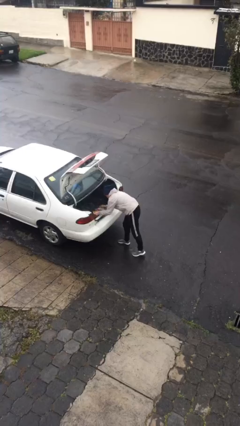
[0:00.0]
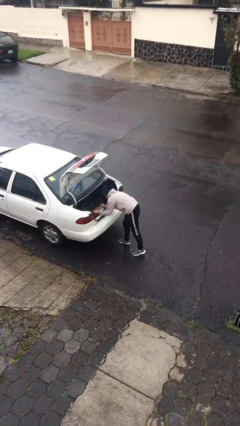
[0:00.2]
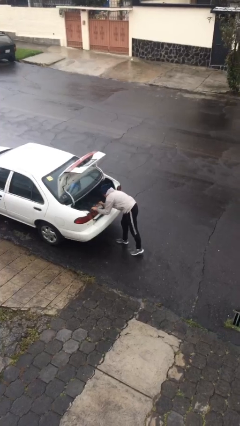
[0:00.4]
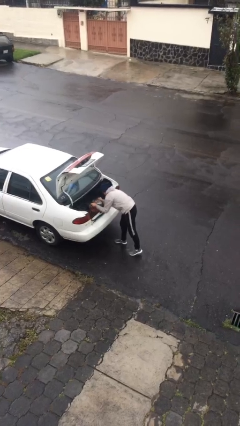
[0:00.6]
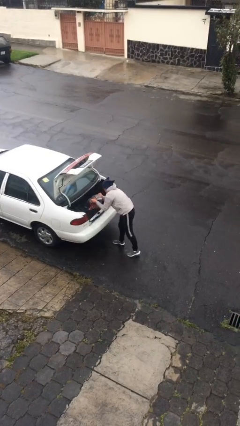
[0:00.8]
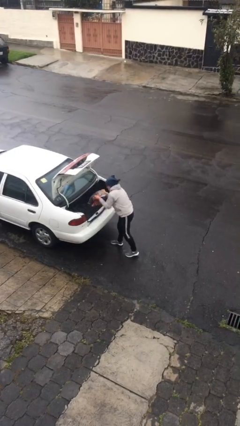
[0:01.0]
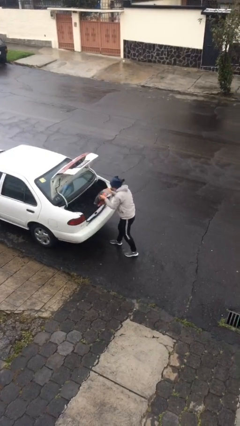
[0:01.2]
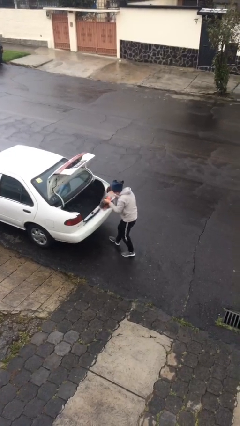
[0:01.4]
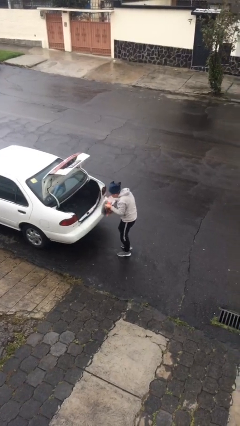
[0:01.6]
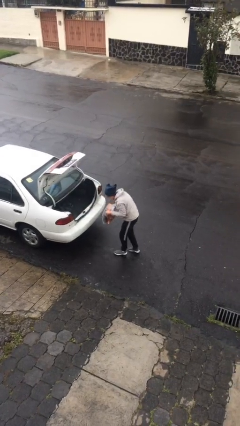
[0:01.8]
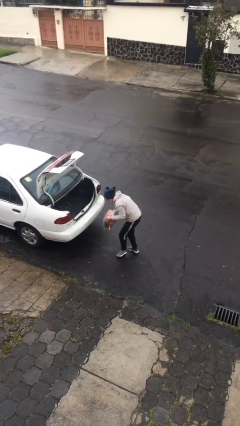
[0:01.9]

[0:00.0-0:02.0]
person unloads car

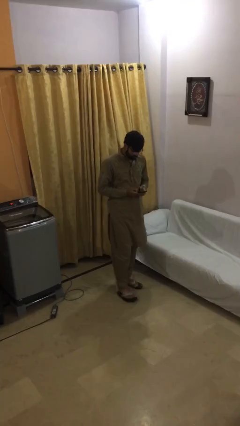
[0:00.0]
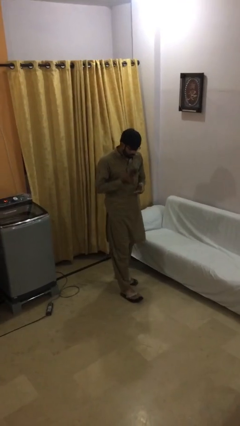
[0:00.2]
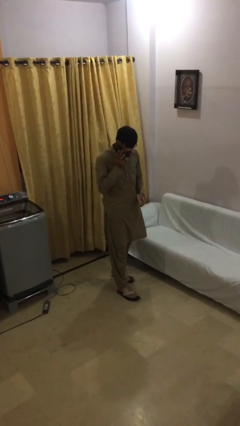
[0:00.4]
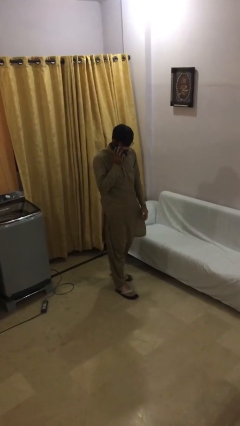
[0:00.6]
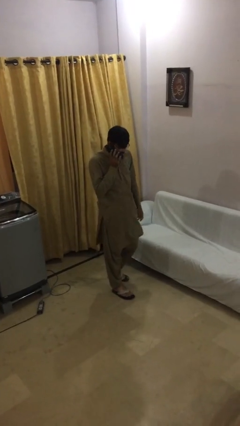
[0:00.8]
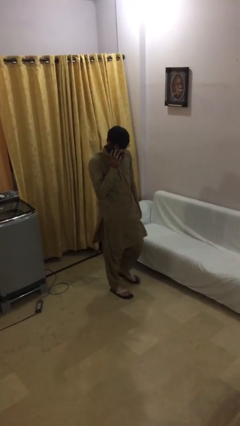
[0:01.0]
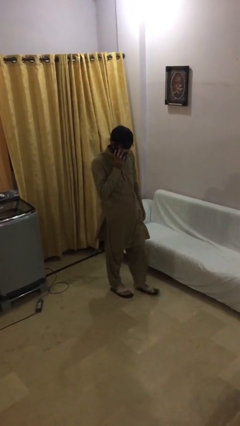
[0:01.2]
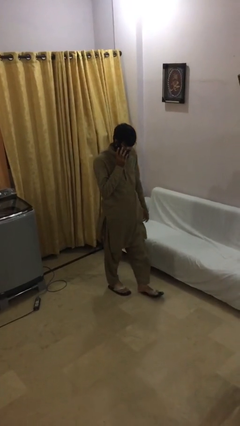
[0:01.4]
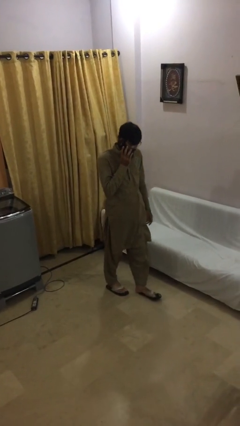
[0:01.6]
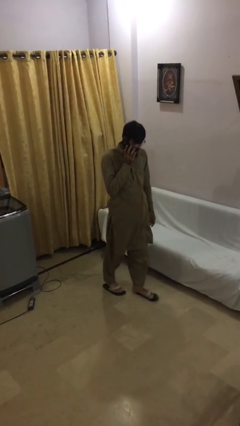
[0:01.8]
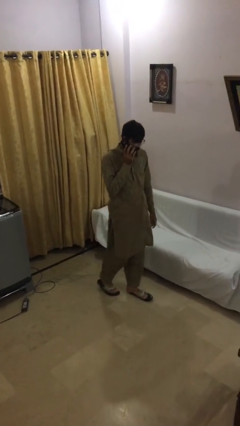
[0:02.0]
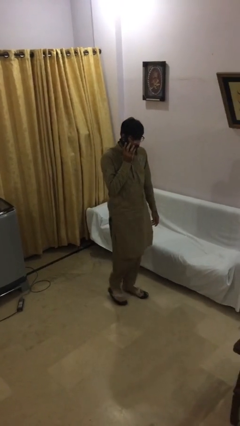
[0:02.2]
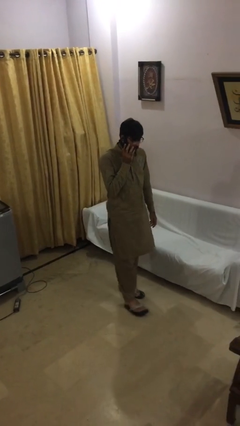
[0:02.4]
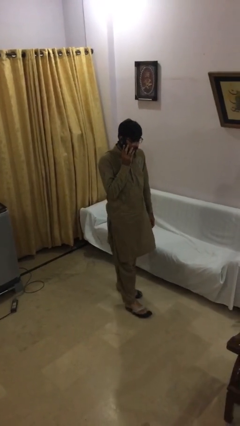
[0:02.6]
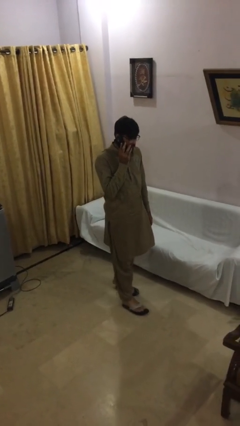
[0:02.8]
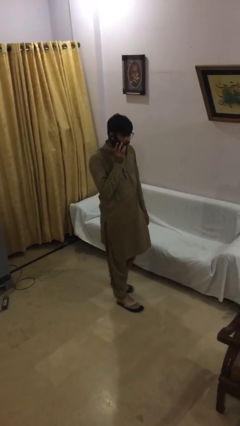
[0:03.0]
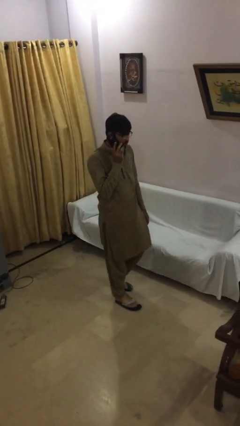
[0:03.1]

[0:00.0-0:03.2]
person talks on phone

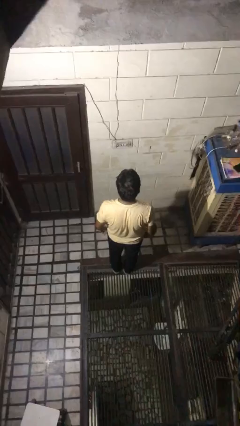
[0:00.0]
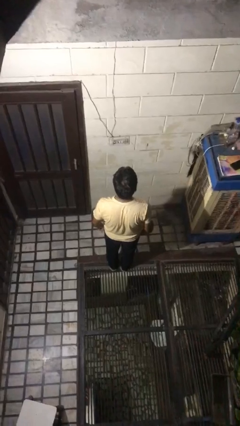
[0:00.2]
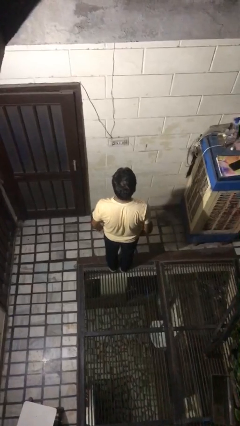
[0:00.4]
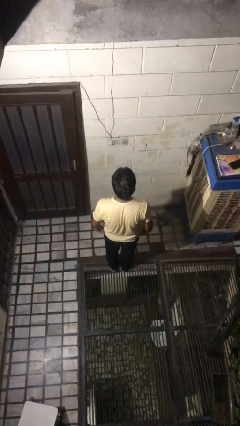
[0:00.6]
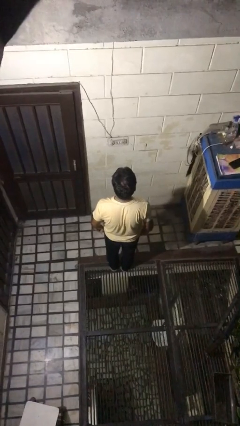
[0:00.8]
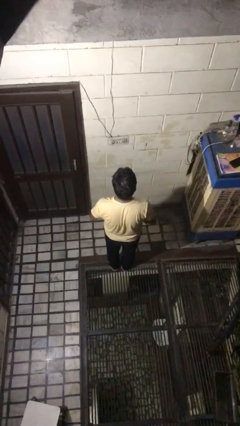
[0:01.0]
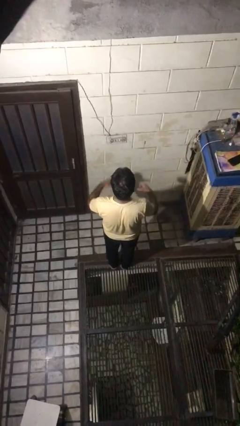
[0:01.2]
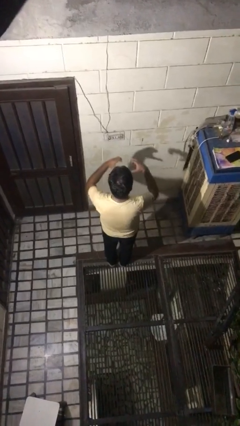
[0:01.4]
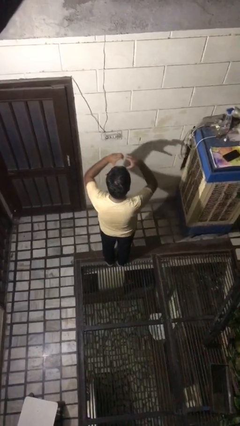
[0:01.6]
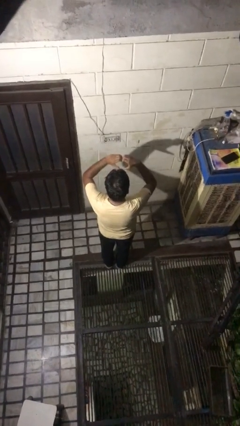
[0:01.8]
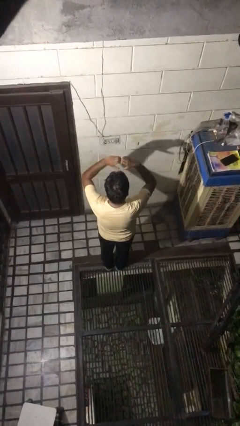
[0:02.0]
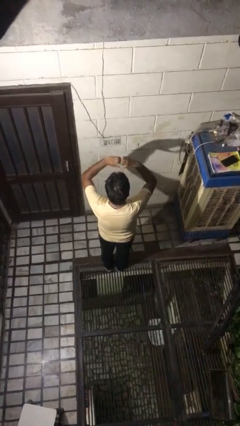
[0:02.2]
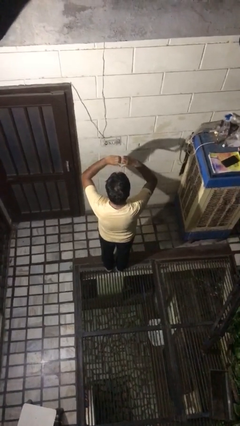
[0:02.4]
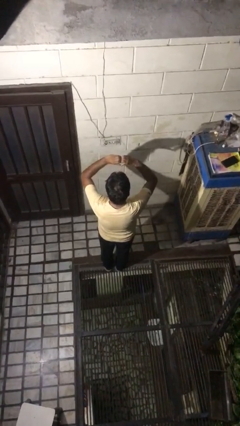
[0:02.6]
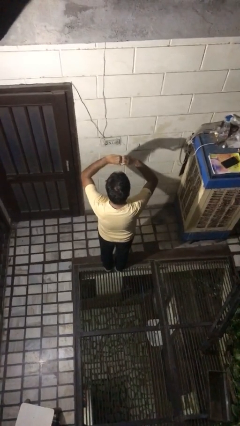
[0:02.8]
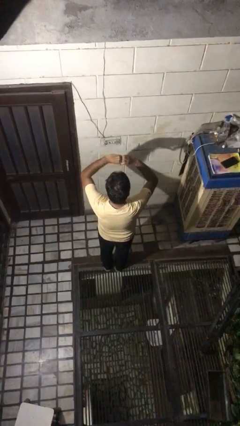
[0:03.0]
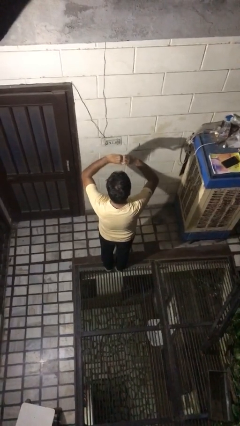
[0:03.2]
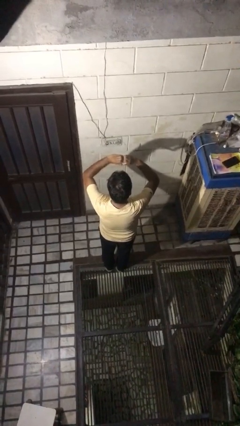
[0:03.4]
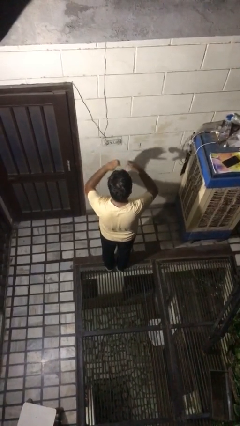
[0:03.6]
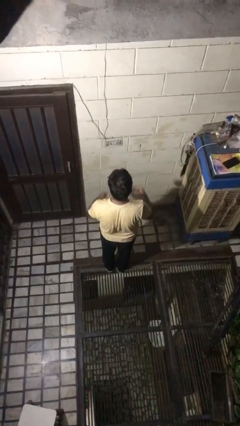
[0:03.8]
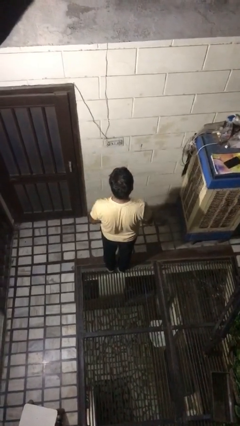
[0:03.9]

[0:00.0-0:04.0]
person gestures heart

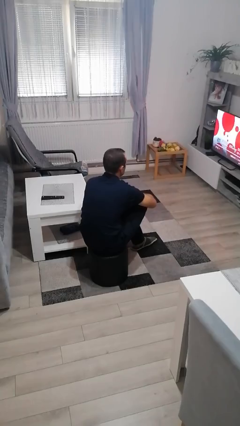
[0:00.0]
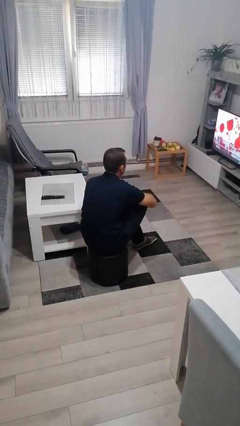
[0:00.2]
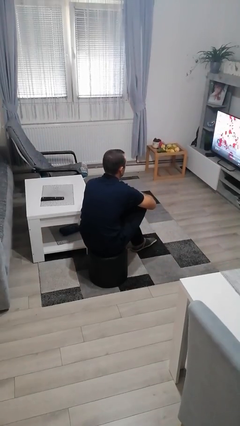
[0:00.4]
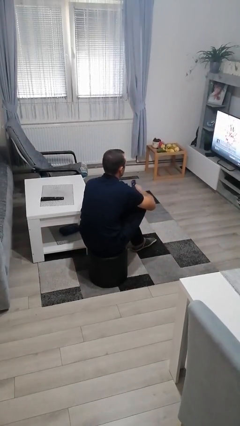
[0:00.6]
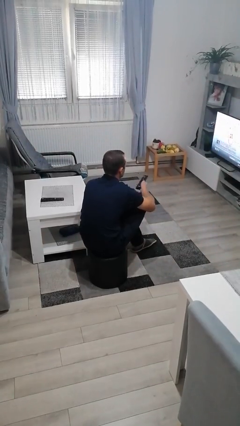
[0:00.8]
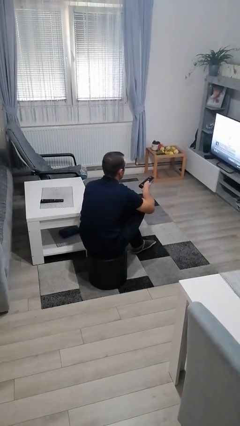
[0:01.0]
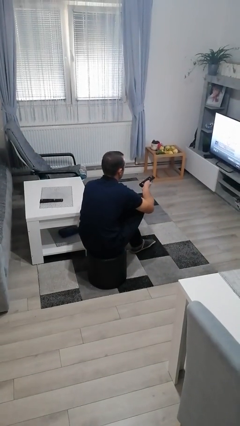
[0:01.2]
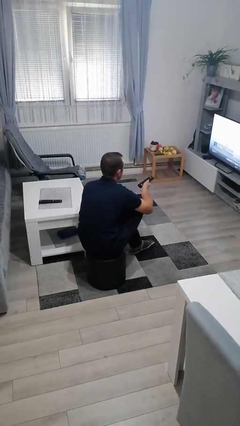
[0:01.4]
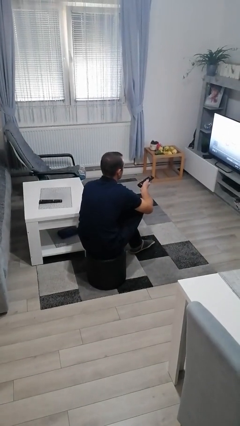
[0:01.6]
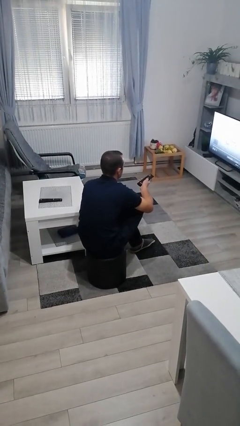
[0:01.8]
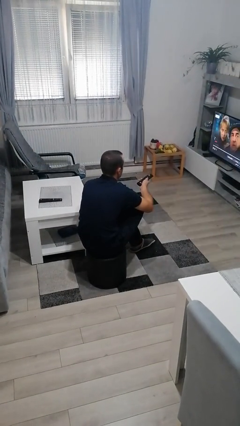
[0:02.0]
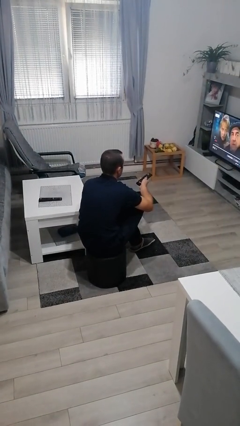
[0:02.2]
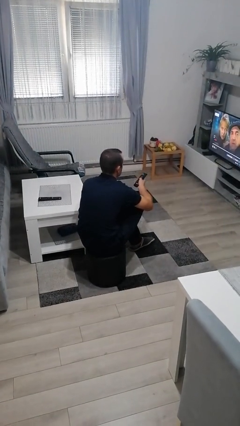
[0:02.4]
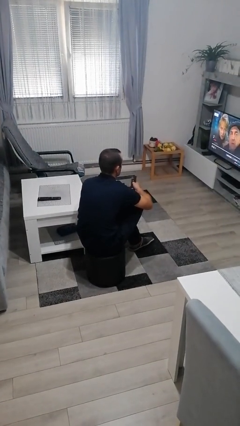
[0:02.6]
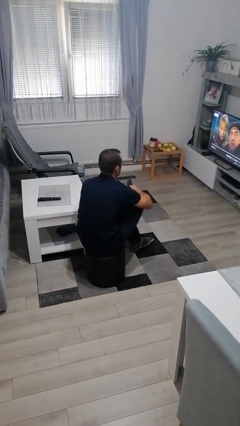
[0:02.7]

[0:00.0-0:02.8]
person uses television remote

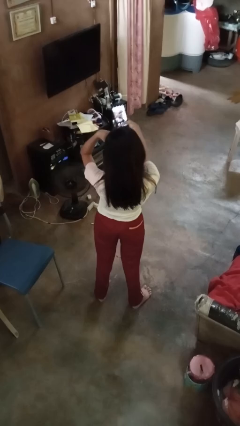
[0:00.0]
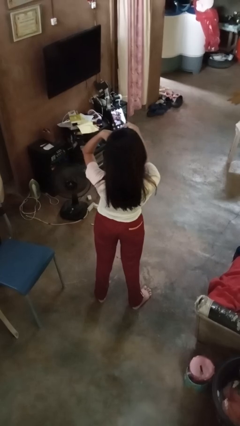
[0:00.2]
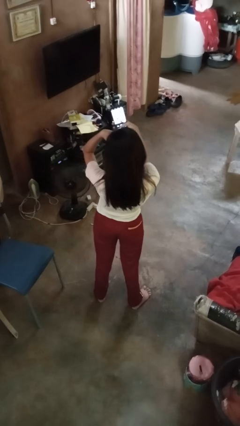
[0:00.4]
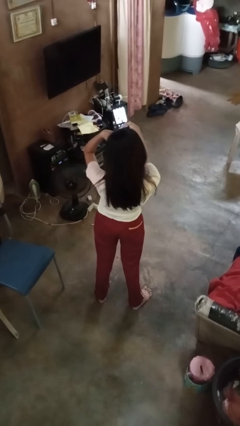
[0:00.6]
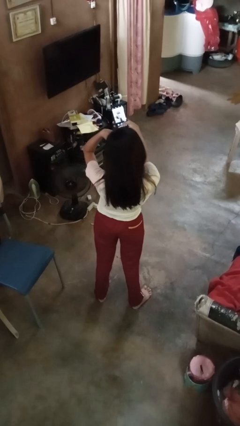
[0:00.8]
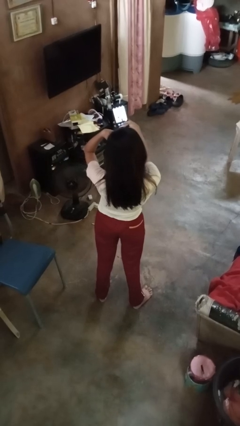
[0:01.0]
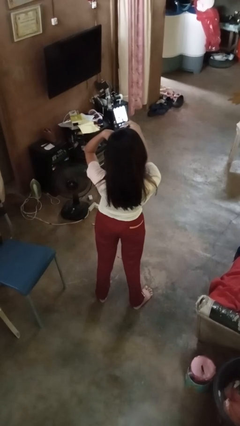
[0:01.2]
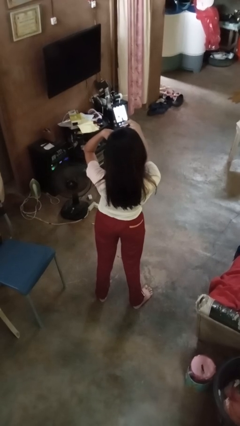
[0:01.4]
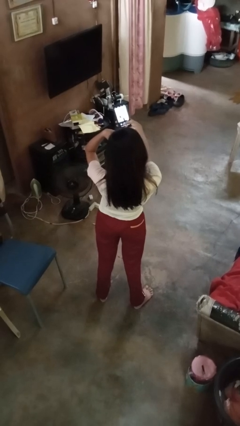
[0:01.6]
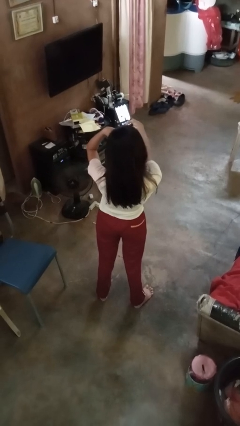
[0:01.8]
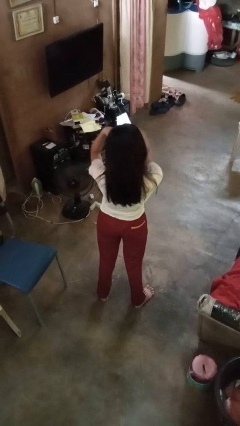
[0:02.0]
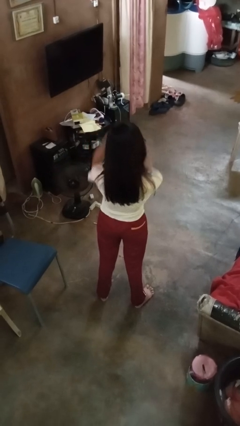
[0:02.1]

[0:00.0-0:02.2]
person takes selfie

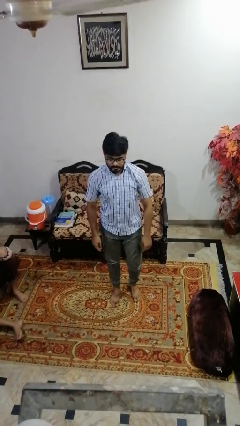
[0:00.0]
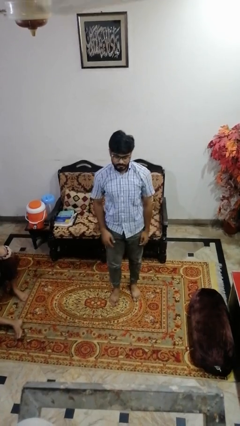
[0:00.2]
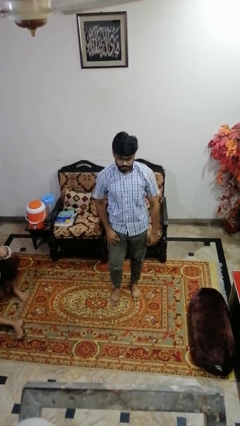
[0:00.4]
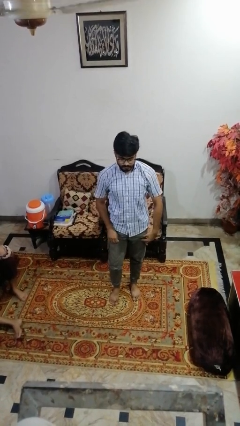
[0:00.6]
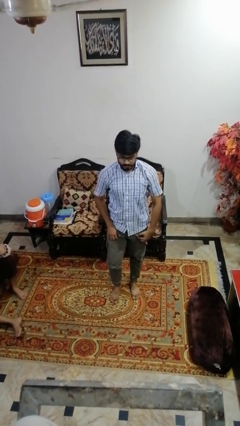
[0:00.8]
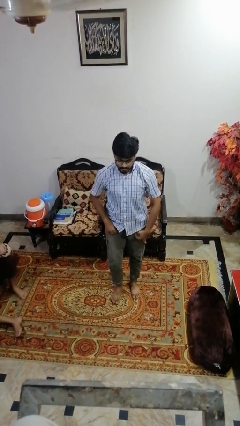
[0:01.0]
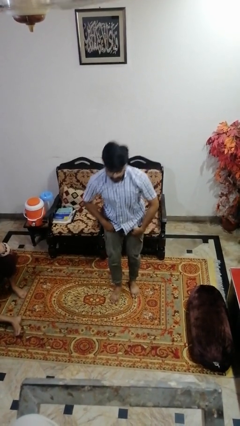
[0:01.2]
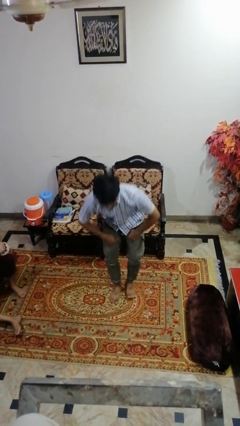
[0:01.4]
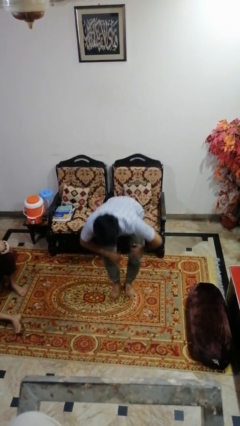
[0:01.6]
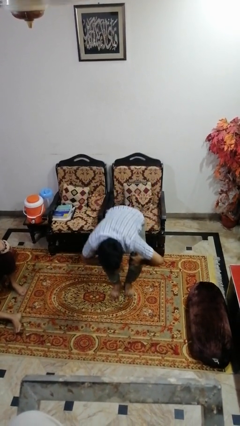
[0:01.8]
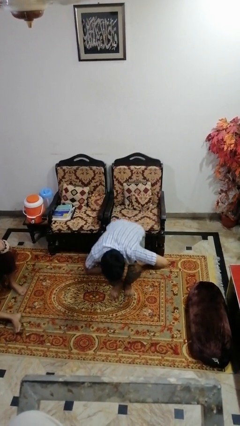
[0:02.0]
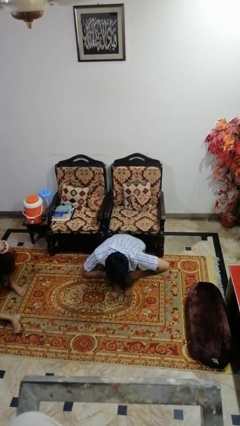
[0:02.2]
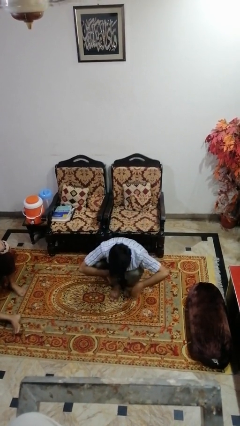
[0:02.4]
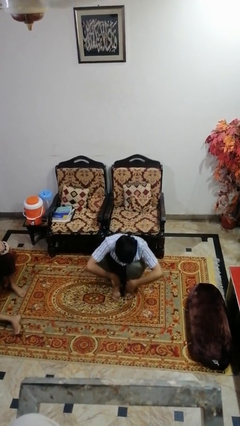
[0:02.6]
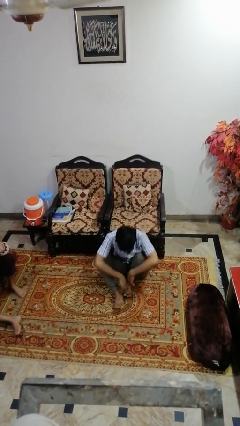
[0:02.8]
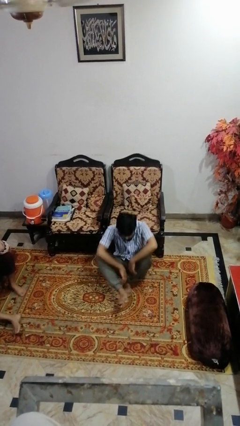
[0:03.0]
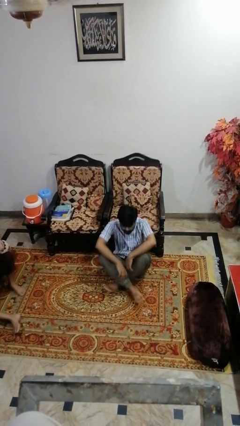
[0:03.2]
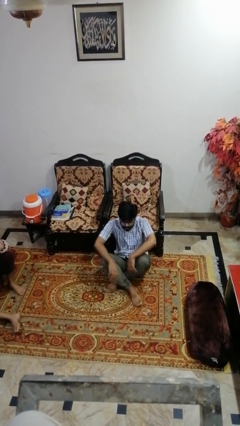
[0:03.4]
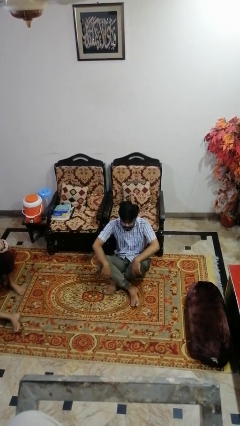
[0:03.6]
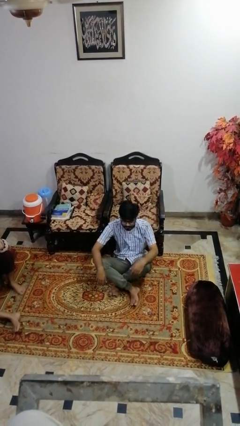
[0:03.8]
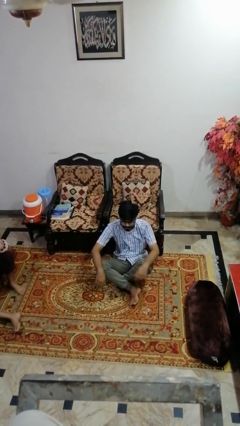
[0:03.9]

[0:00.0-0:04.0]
person sits crisscross
